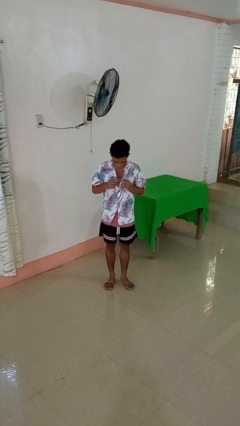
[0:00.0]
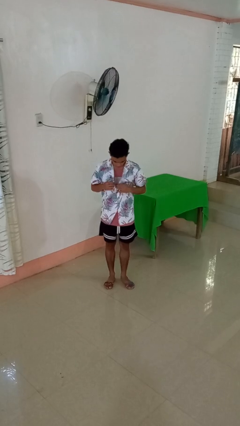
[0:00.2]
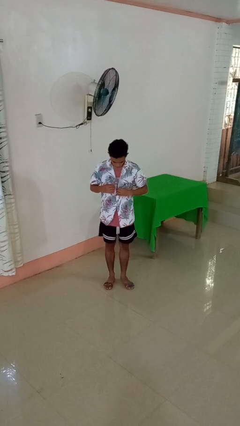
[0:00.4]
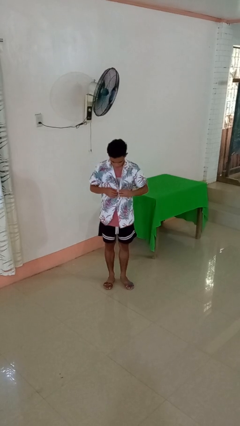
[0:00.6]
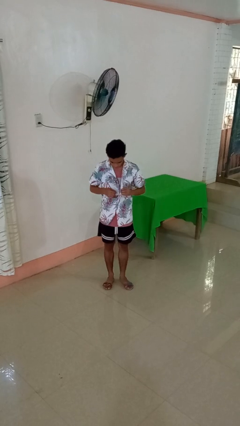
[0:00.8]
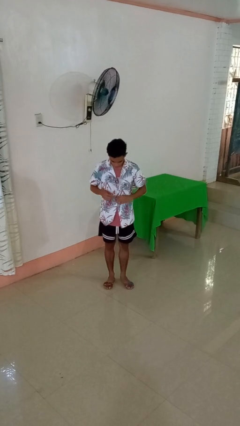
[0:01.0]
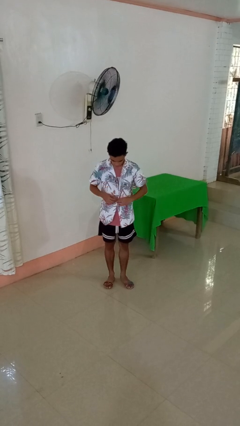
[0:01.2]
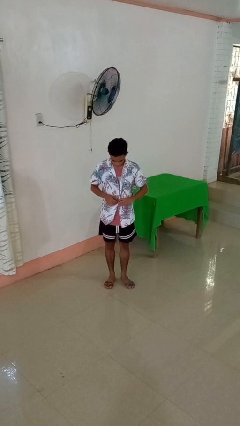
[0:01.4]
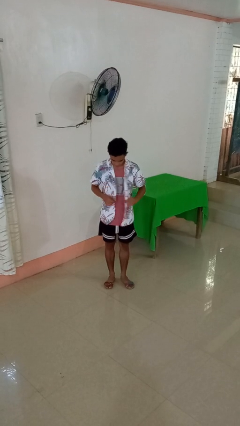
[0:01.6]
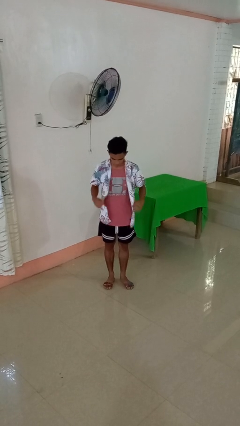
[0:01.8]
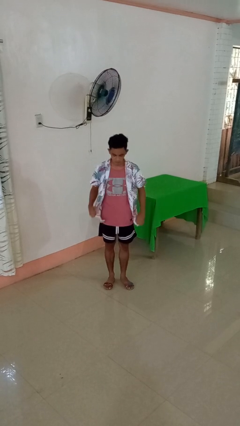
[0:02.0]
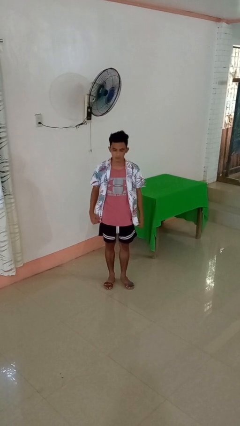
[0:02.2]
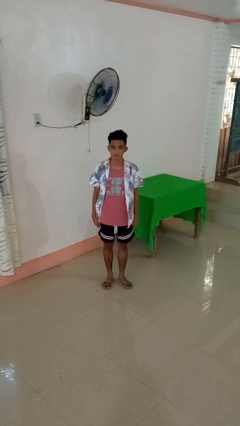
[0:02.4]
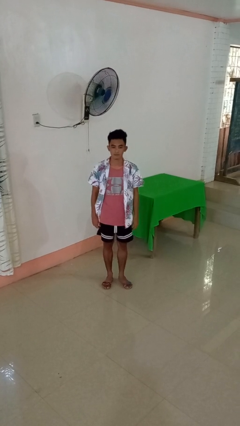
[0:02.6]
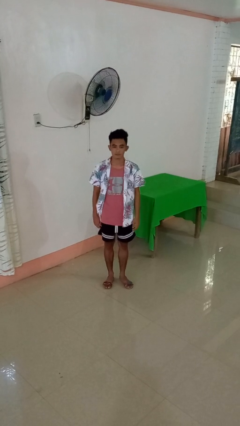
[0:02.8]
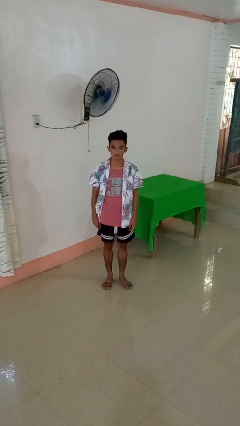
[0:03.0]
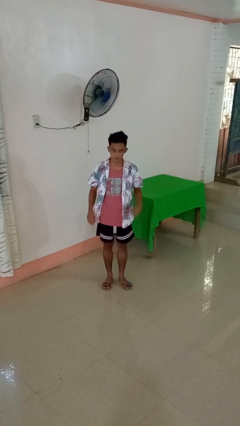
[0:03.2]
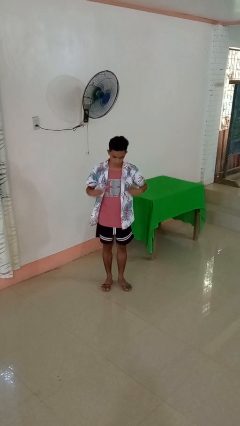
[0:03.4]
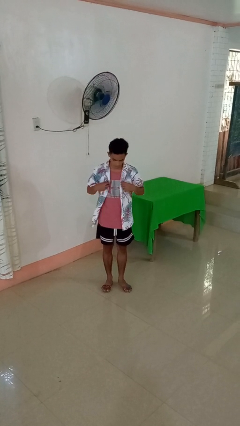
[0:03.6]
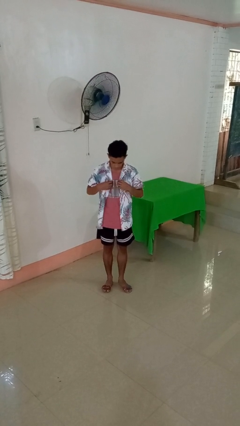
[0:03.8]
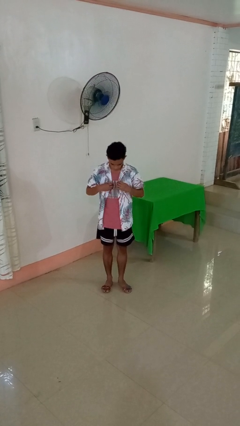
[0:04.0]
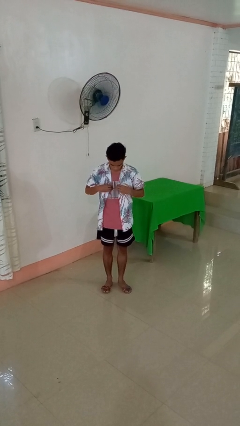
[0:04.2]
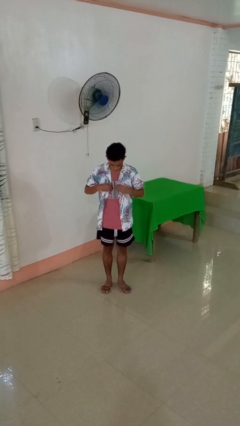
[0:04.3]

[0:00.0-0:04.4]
person unbuttons shirt

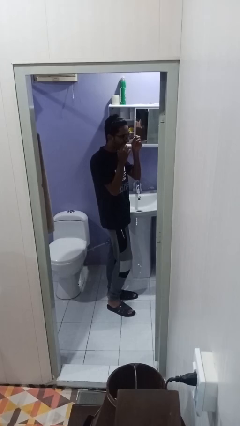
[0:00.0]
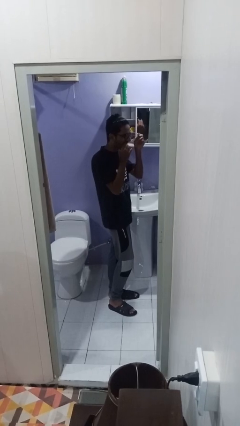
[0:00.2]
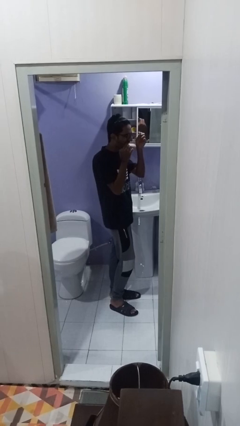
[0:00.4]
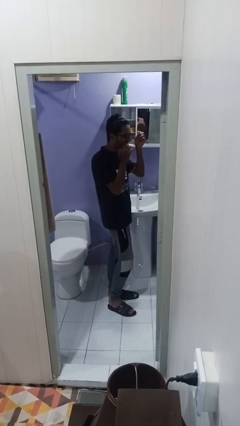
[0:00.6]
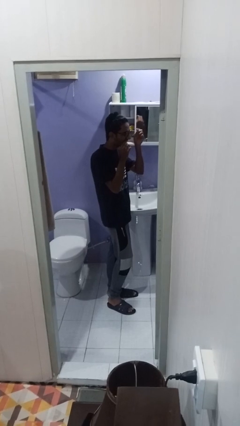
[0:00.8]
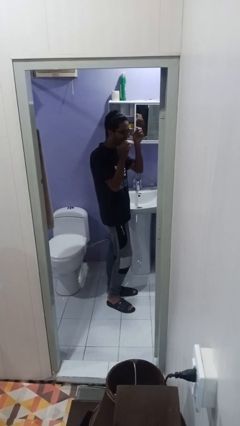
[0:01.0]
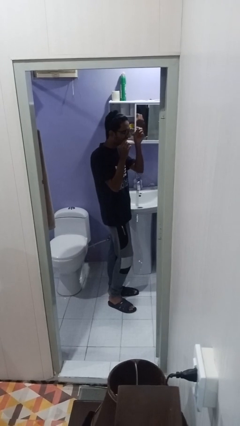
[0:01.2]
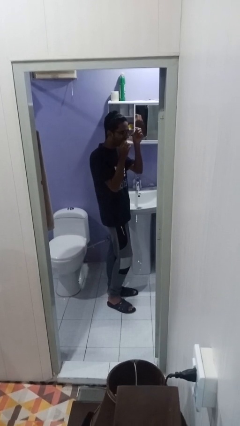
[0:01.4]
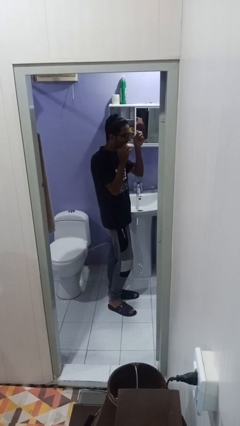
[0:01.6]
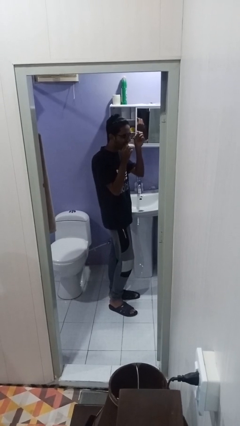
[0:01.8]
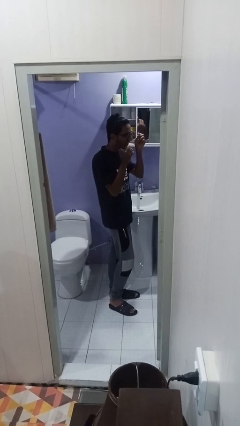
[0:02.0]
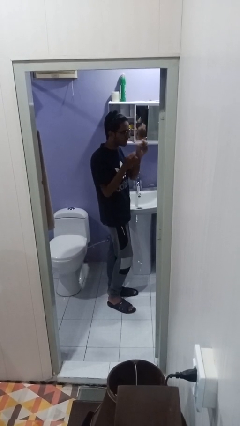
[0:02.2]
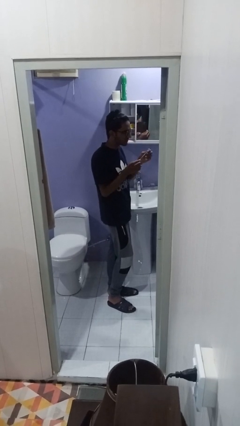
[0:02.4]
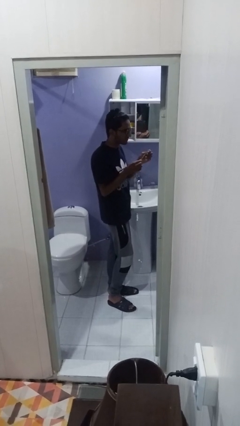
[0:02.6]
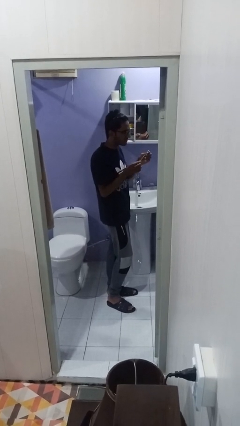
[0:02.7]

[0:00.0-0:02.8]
person flosses

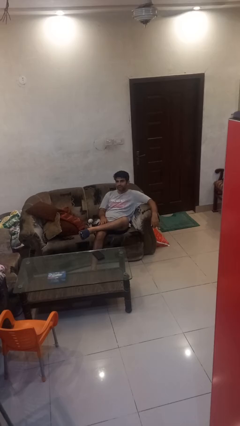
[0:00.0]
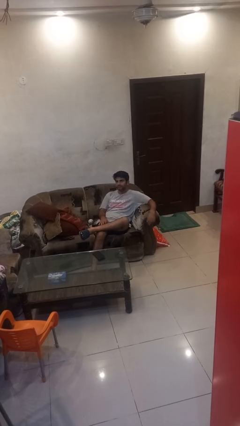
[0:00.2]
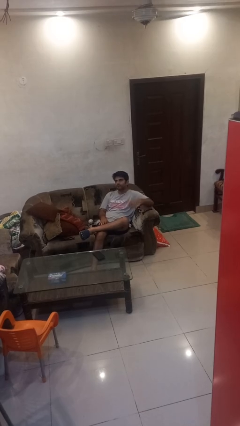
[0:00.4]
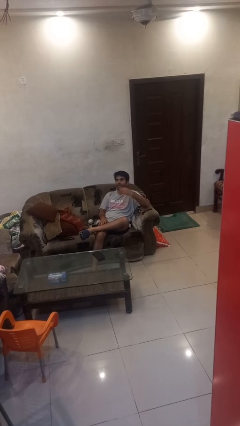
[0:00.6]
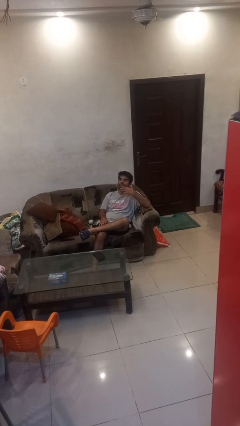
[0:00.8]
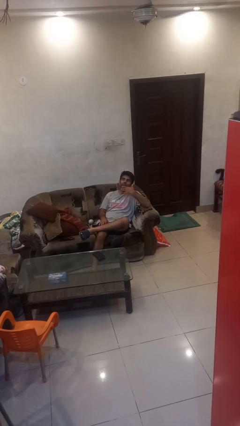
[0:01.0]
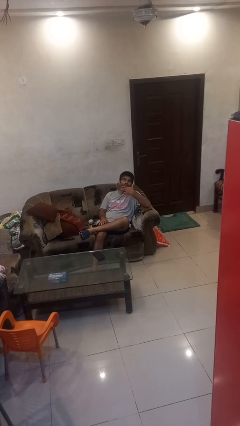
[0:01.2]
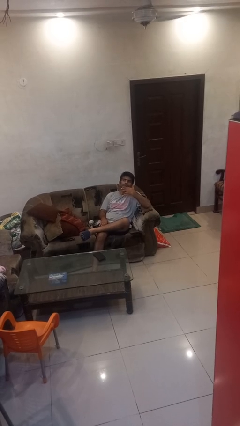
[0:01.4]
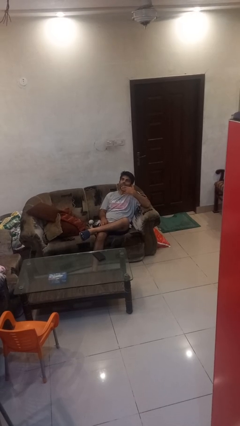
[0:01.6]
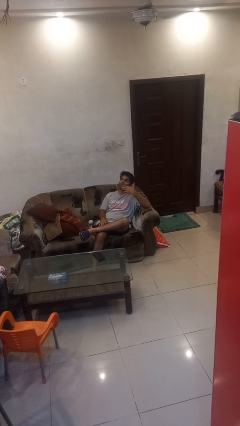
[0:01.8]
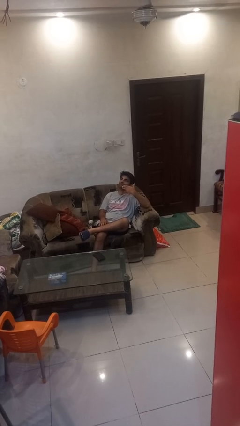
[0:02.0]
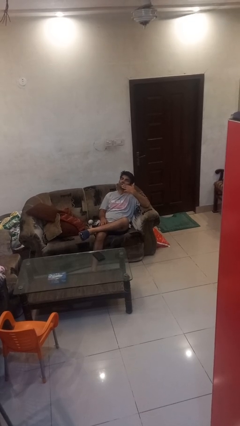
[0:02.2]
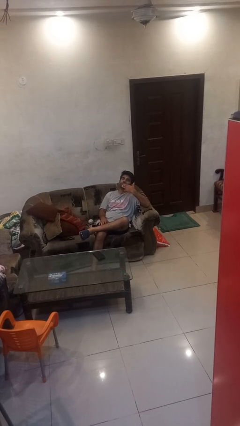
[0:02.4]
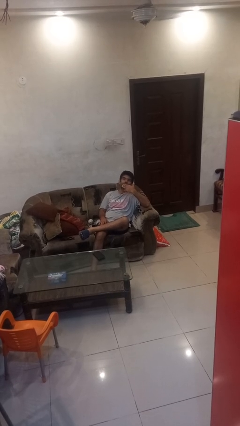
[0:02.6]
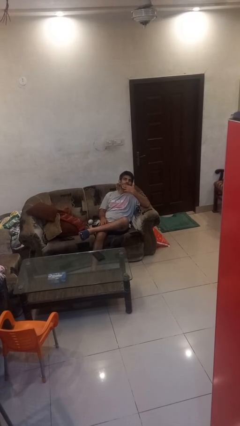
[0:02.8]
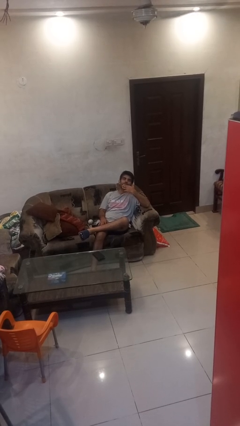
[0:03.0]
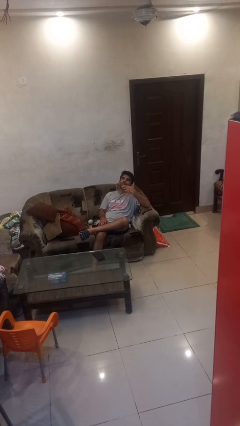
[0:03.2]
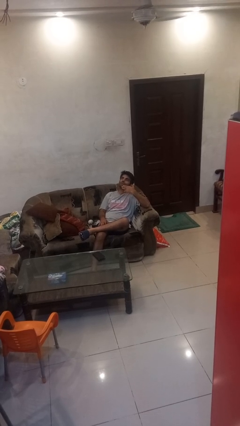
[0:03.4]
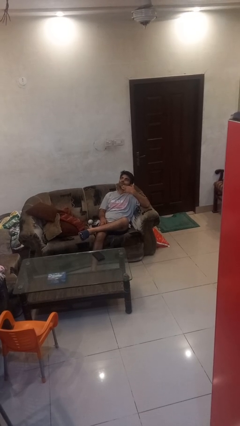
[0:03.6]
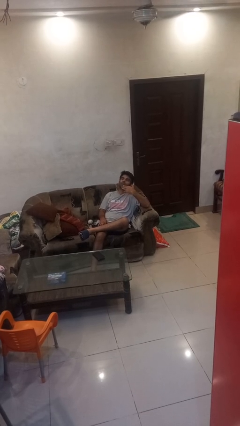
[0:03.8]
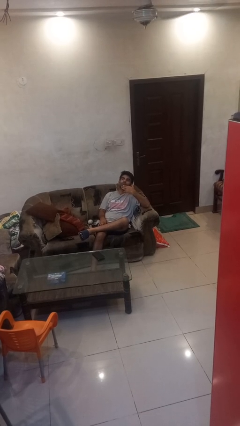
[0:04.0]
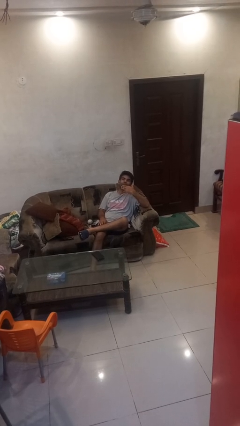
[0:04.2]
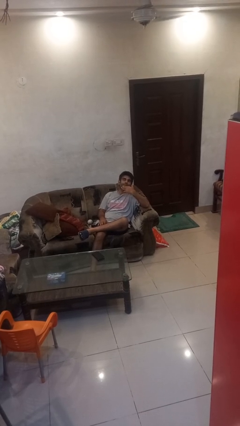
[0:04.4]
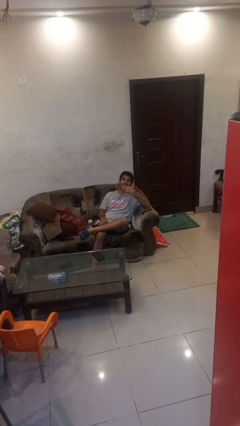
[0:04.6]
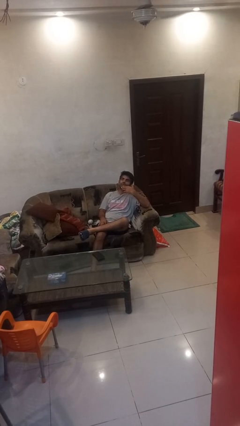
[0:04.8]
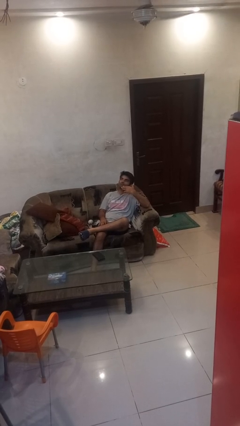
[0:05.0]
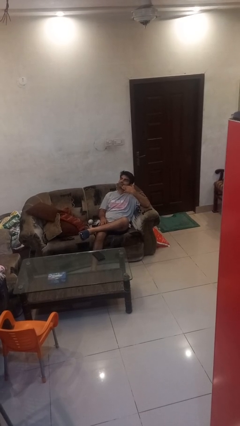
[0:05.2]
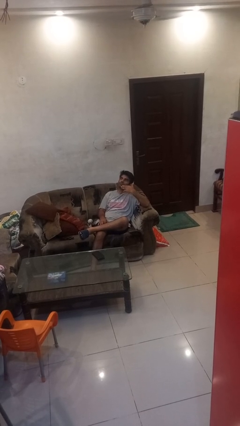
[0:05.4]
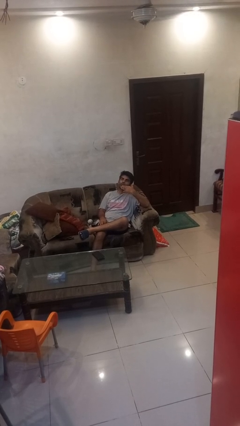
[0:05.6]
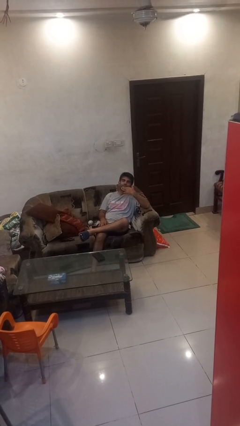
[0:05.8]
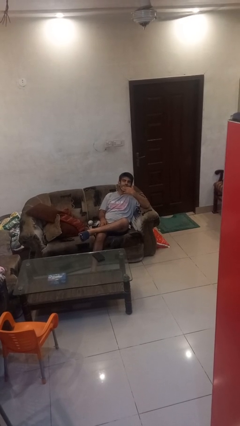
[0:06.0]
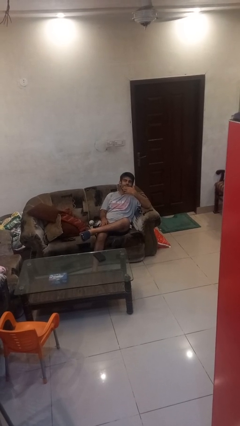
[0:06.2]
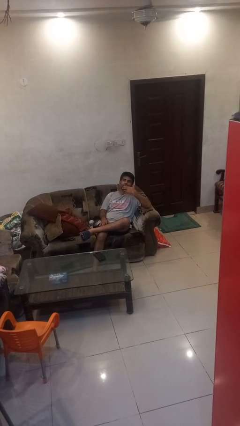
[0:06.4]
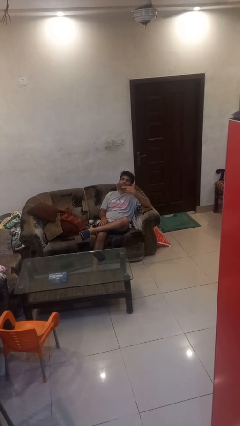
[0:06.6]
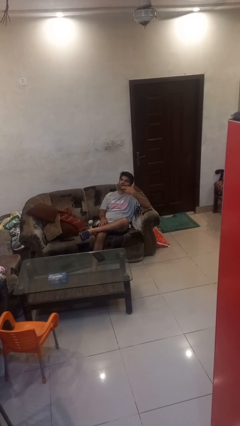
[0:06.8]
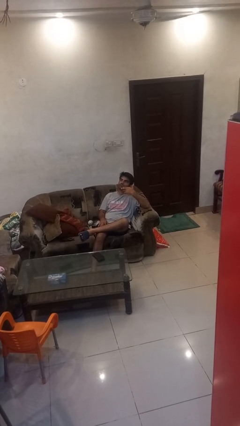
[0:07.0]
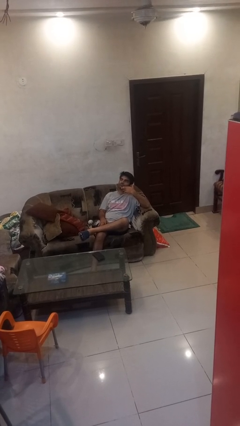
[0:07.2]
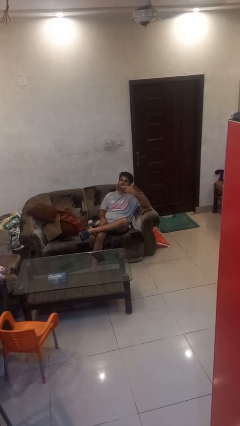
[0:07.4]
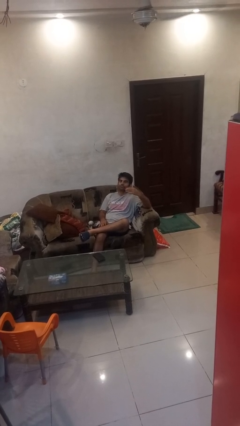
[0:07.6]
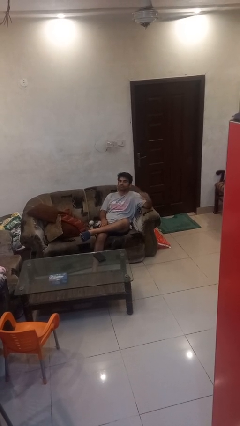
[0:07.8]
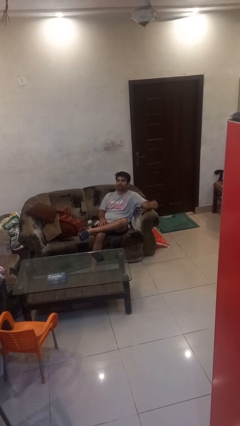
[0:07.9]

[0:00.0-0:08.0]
person strokes chin

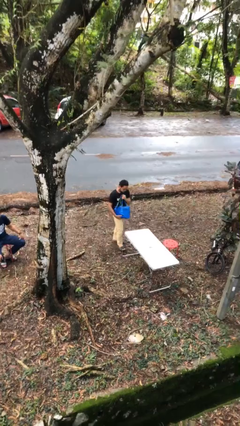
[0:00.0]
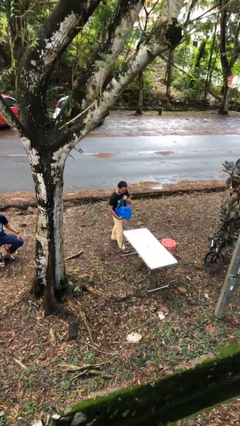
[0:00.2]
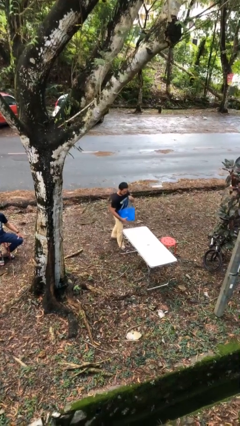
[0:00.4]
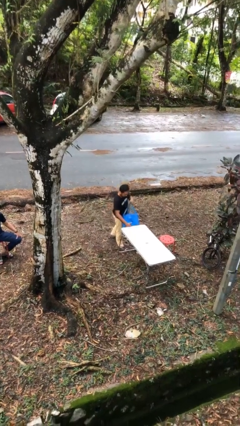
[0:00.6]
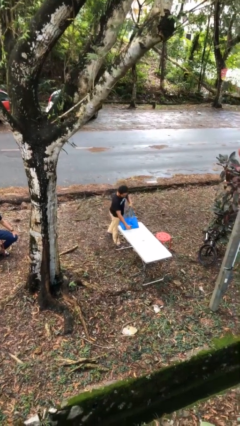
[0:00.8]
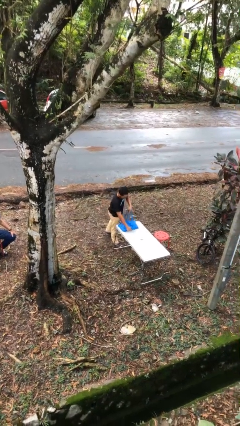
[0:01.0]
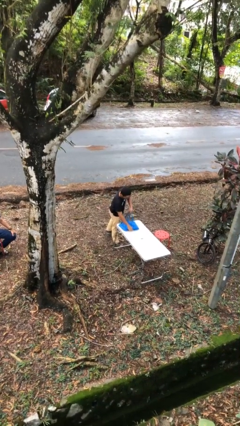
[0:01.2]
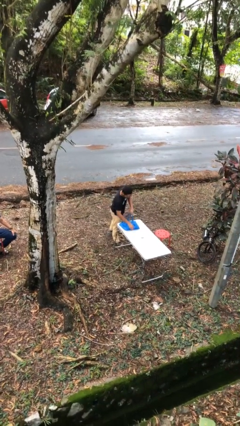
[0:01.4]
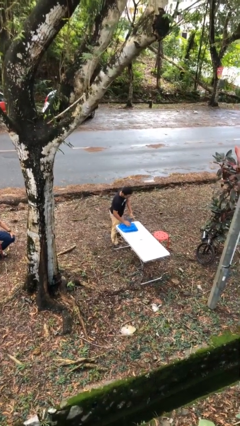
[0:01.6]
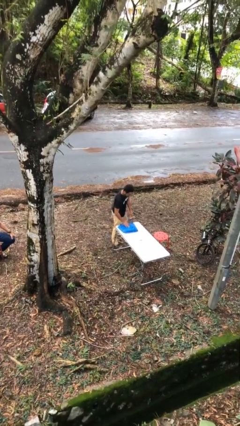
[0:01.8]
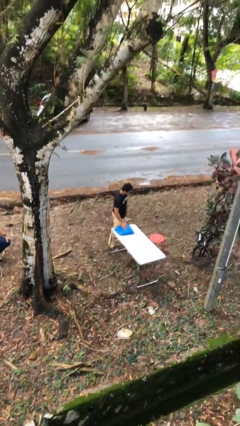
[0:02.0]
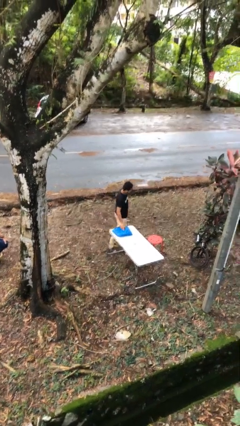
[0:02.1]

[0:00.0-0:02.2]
person puts down object on table
